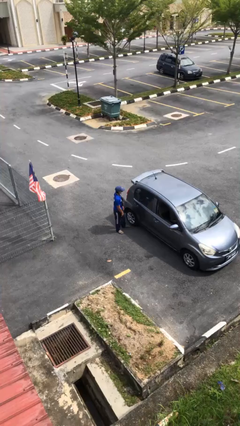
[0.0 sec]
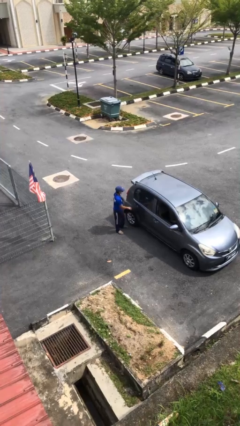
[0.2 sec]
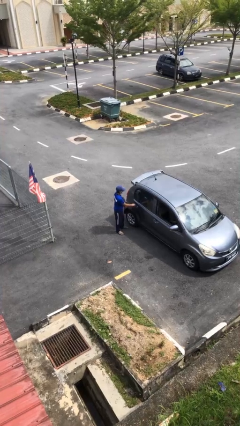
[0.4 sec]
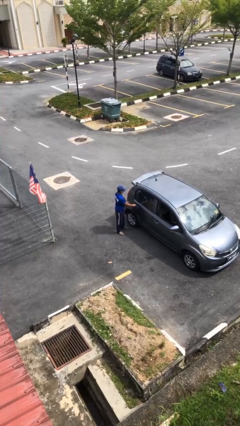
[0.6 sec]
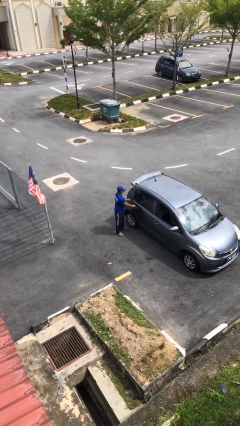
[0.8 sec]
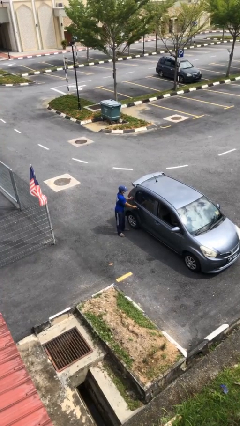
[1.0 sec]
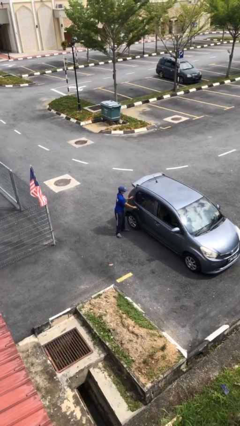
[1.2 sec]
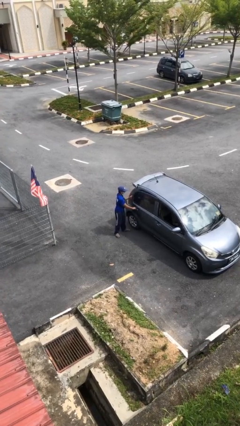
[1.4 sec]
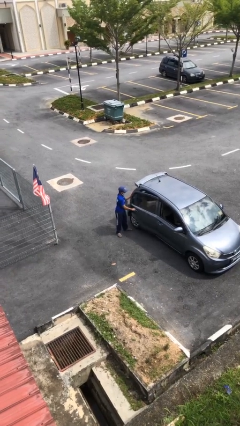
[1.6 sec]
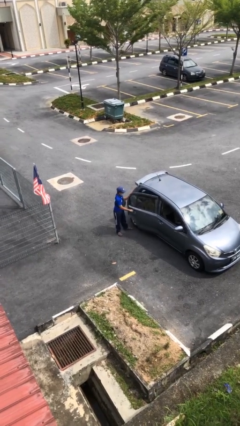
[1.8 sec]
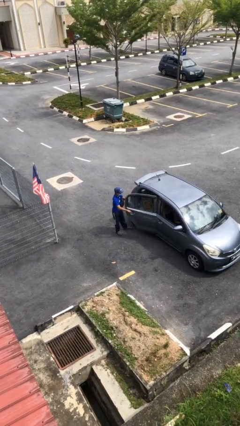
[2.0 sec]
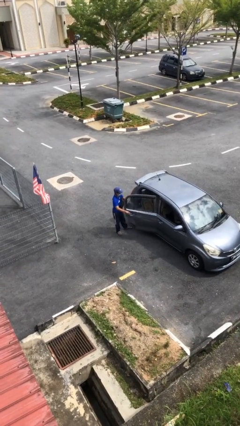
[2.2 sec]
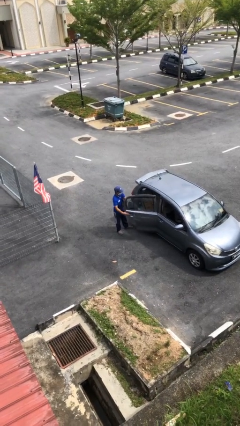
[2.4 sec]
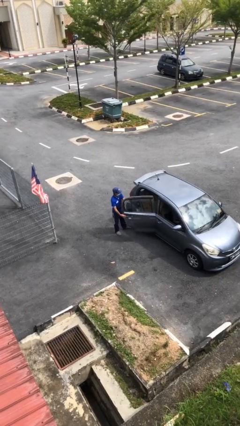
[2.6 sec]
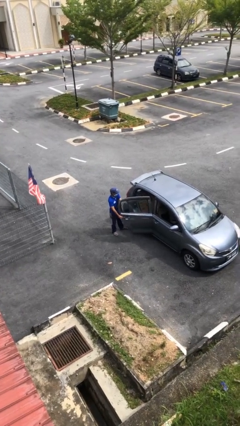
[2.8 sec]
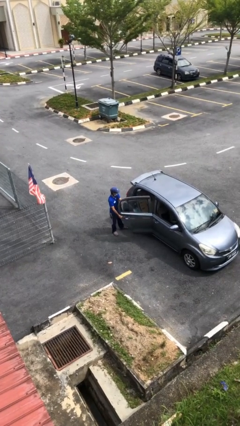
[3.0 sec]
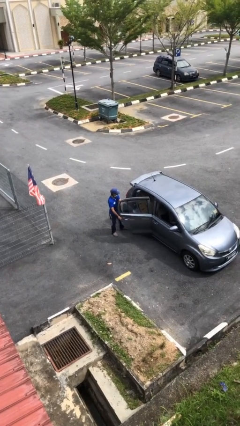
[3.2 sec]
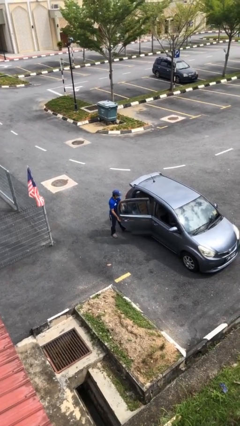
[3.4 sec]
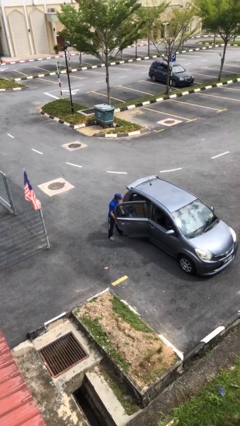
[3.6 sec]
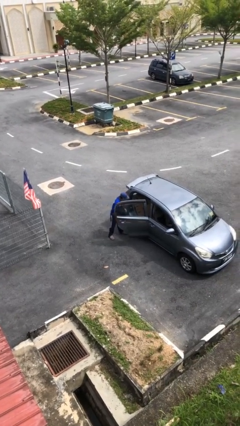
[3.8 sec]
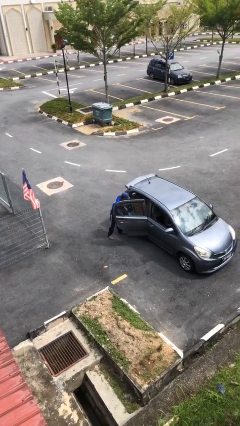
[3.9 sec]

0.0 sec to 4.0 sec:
person opens car door

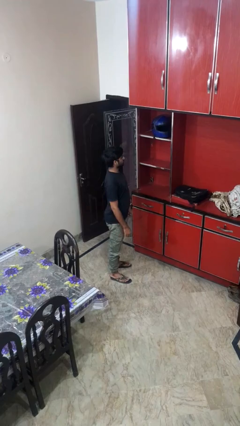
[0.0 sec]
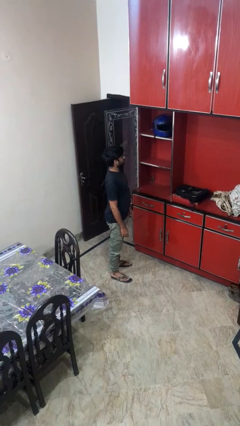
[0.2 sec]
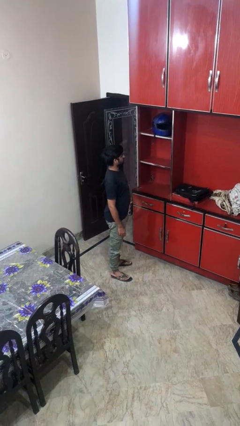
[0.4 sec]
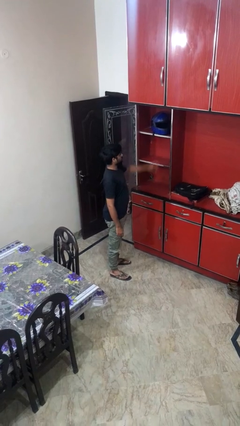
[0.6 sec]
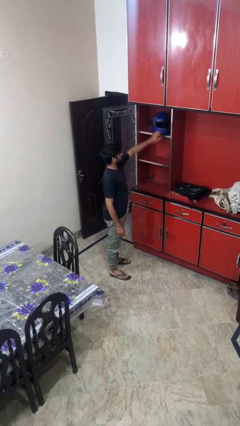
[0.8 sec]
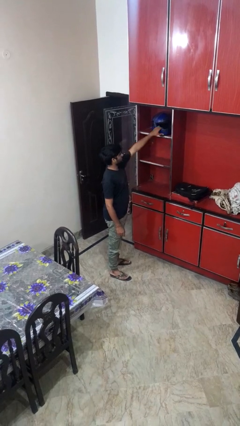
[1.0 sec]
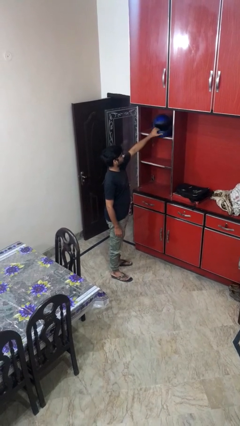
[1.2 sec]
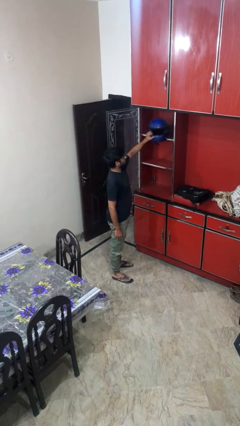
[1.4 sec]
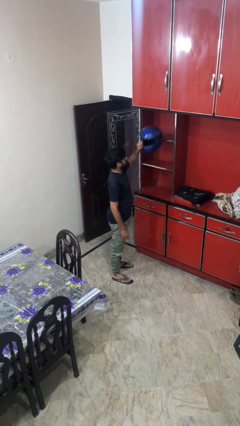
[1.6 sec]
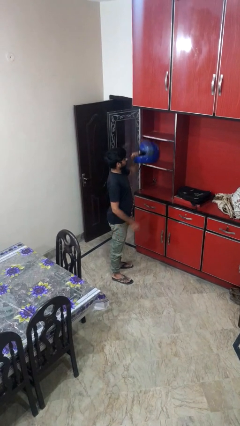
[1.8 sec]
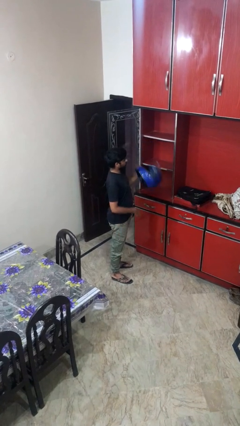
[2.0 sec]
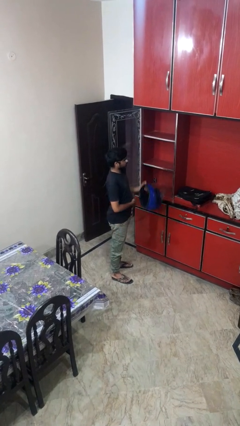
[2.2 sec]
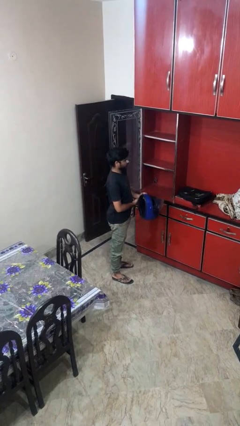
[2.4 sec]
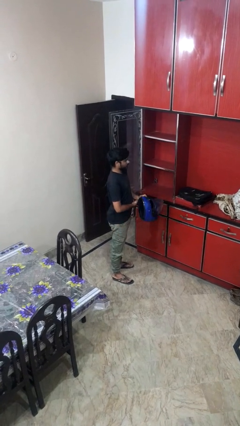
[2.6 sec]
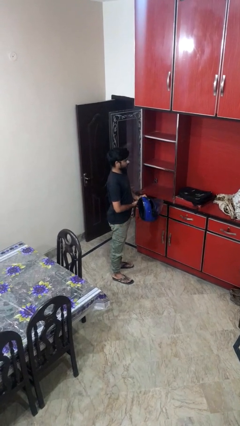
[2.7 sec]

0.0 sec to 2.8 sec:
person picks up object from shelf

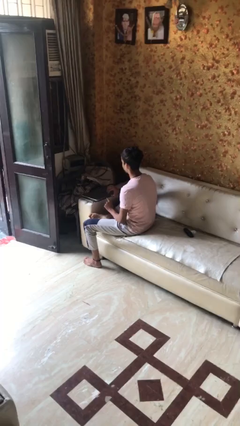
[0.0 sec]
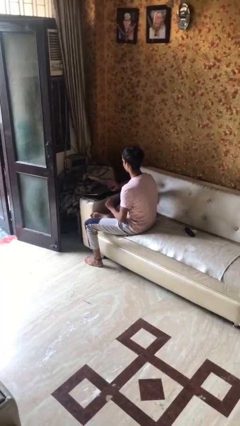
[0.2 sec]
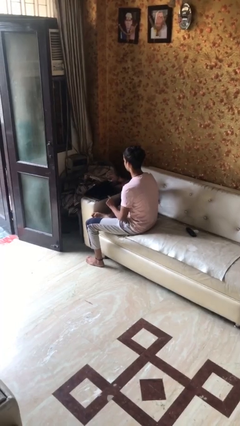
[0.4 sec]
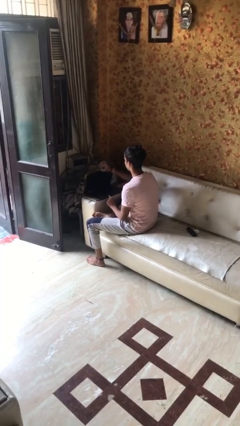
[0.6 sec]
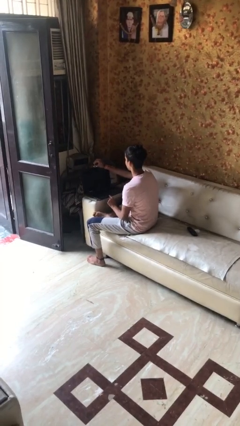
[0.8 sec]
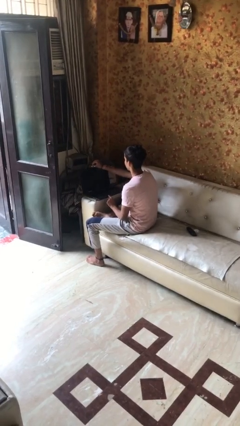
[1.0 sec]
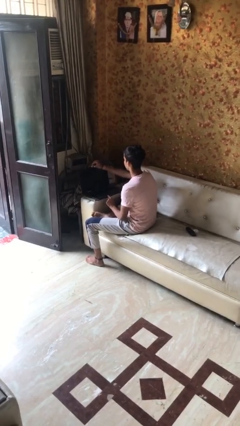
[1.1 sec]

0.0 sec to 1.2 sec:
person opens laptop

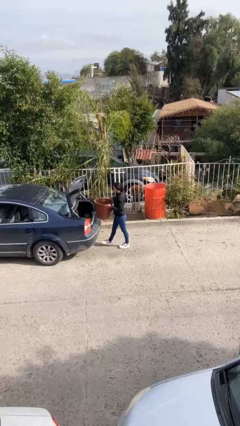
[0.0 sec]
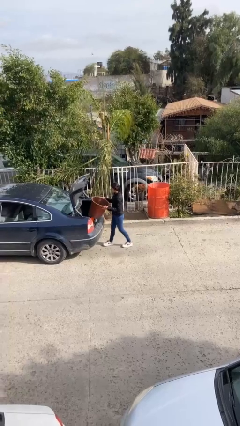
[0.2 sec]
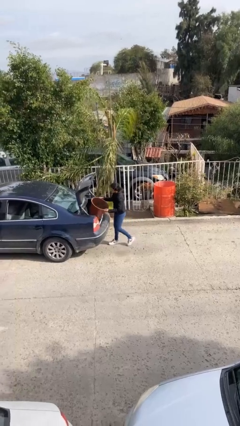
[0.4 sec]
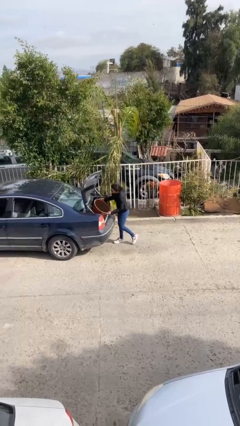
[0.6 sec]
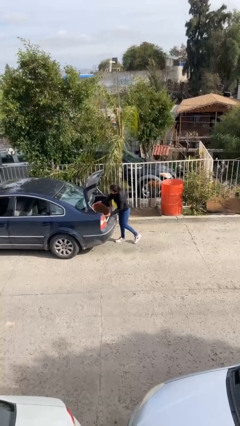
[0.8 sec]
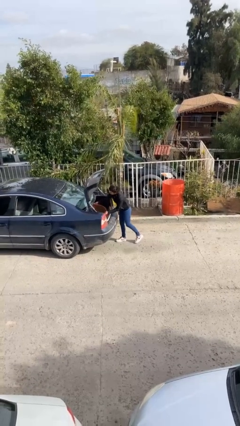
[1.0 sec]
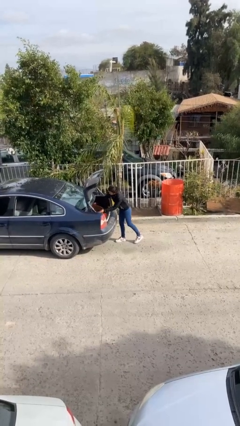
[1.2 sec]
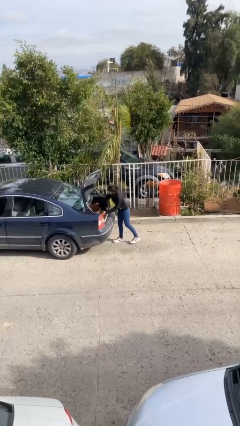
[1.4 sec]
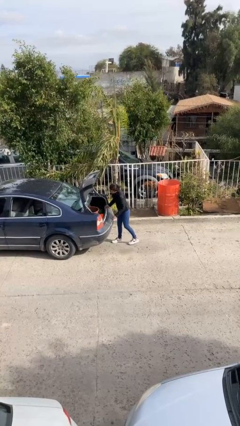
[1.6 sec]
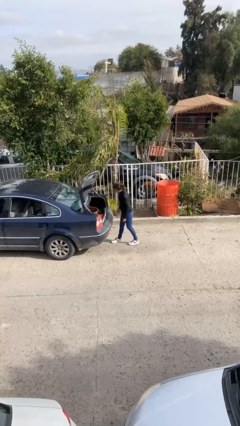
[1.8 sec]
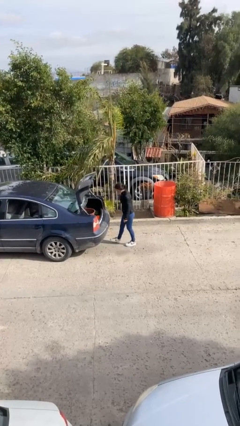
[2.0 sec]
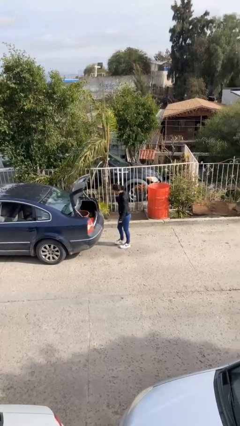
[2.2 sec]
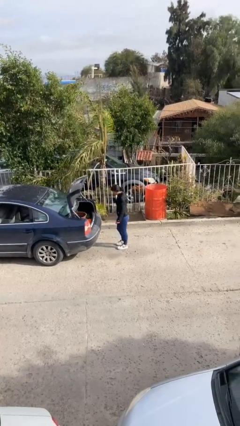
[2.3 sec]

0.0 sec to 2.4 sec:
person loads car

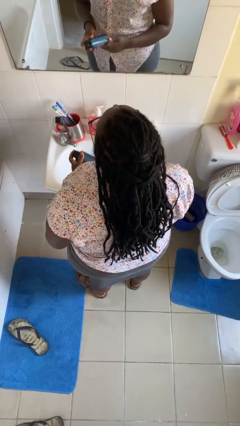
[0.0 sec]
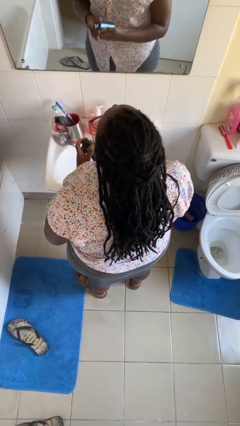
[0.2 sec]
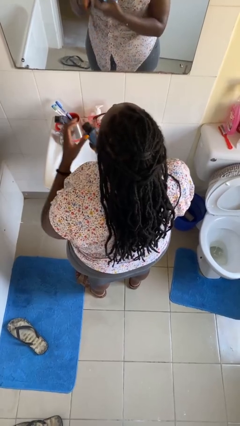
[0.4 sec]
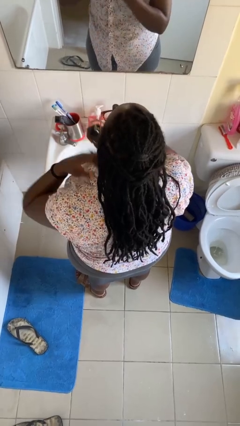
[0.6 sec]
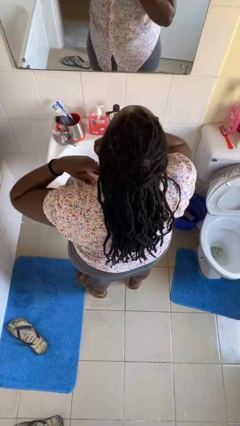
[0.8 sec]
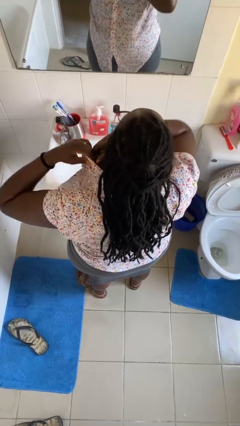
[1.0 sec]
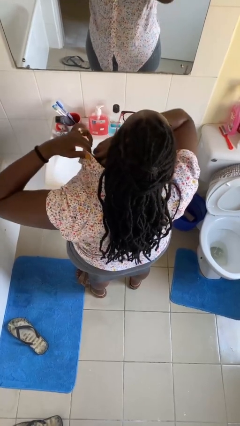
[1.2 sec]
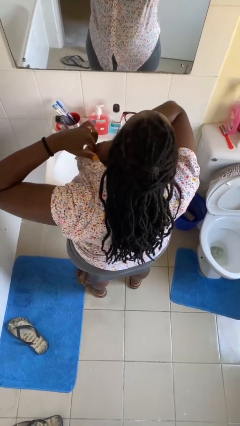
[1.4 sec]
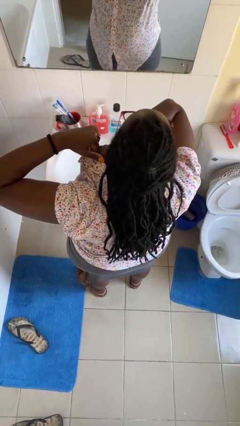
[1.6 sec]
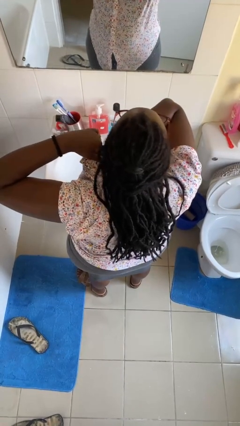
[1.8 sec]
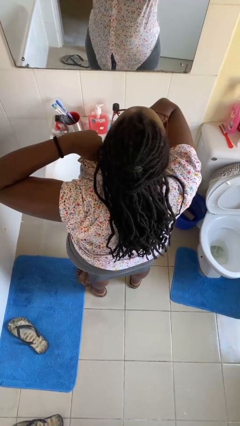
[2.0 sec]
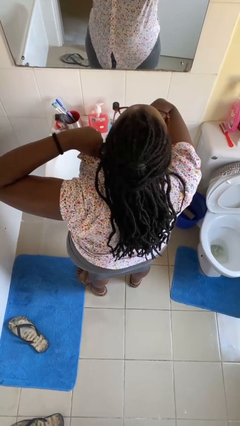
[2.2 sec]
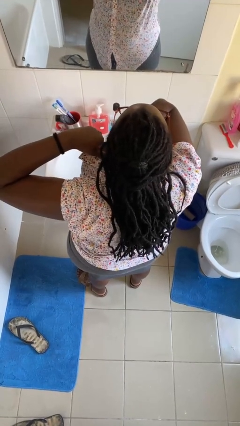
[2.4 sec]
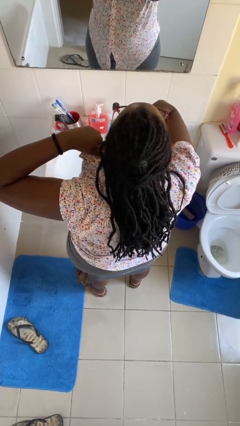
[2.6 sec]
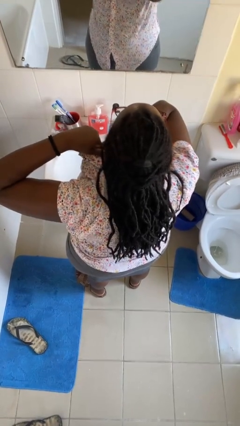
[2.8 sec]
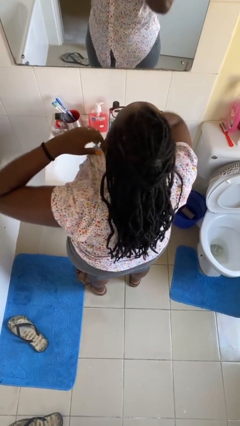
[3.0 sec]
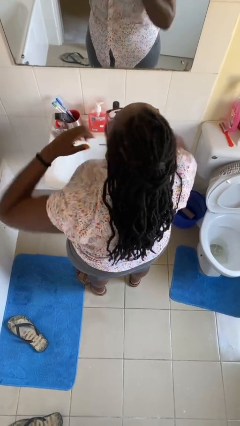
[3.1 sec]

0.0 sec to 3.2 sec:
person applies deodorant

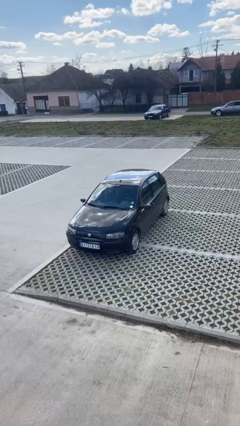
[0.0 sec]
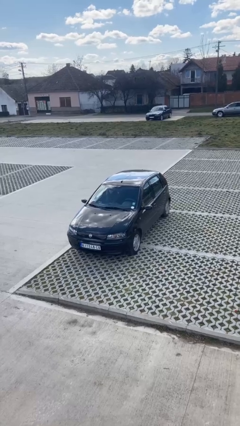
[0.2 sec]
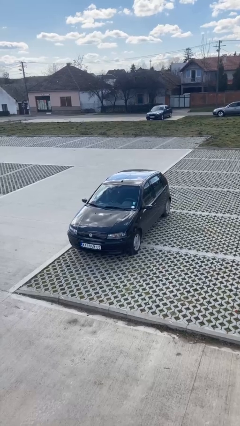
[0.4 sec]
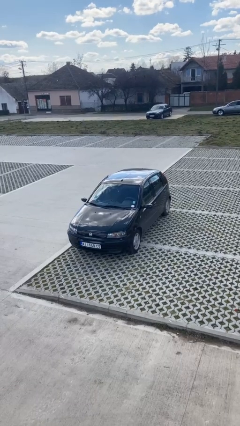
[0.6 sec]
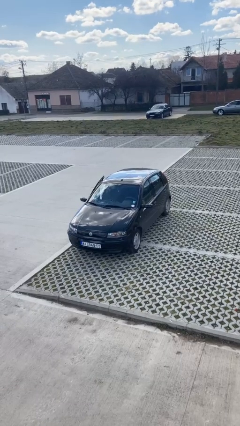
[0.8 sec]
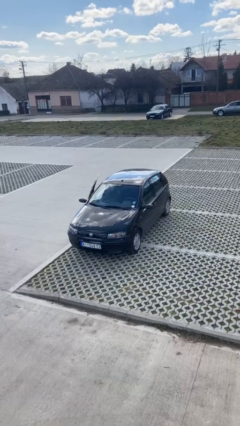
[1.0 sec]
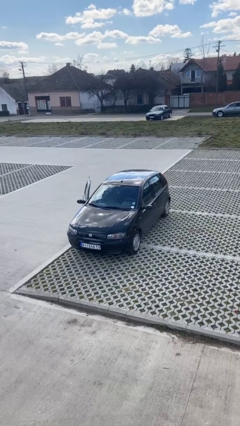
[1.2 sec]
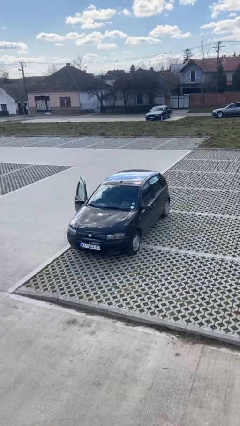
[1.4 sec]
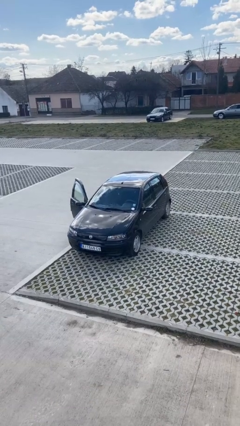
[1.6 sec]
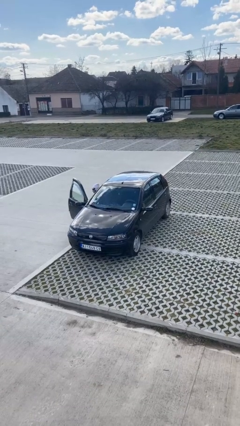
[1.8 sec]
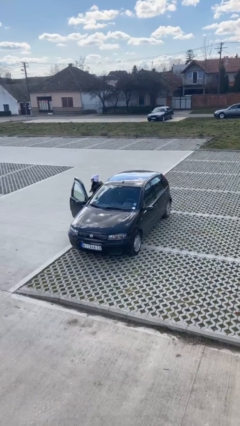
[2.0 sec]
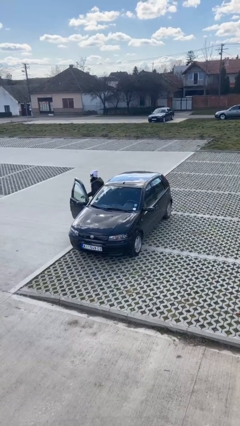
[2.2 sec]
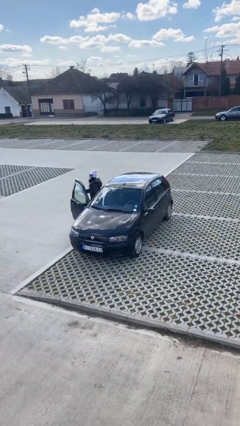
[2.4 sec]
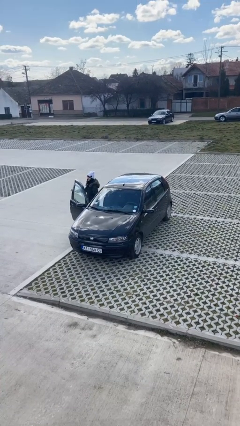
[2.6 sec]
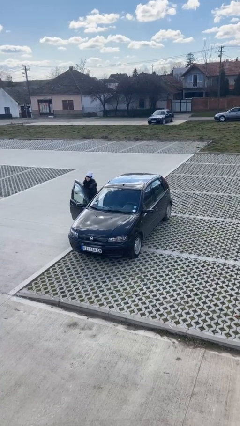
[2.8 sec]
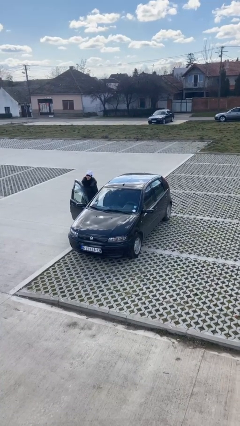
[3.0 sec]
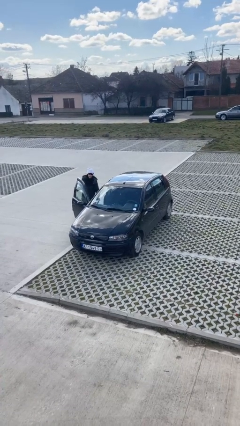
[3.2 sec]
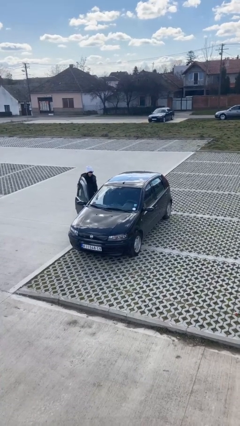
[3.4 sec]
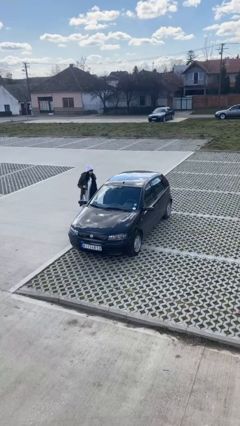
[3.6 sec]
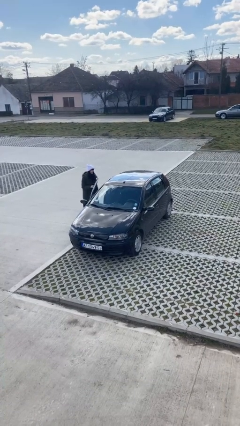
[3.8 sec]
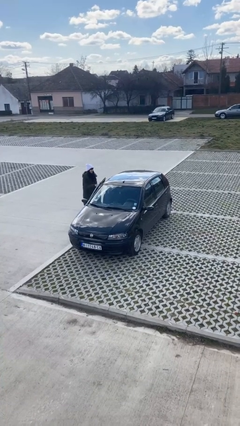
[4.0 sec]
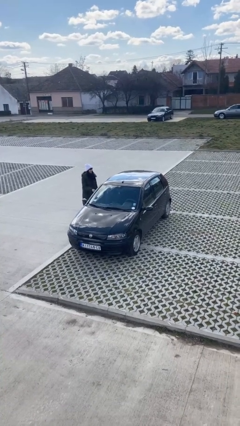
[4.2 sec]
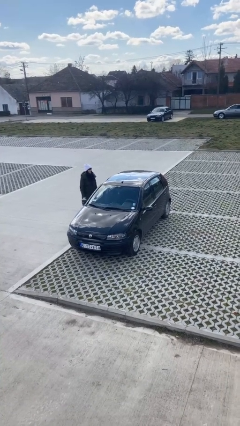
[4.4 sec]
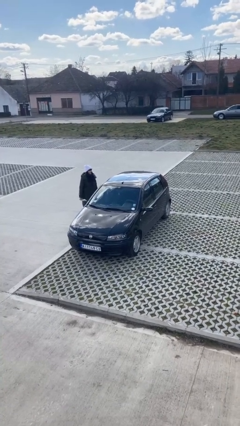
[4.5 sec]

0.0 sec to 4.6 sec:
car drops off person
